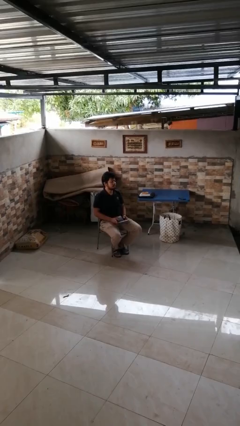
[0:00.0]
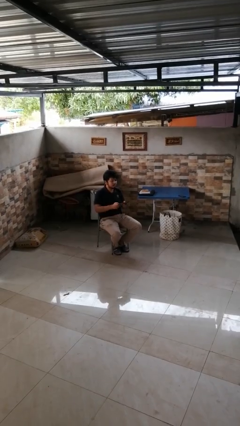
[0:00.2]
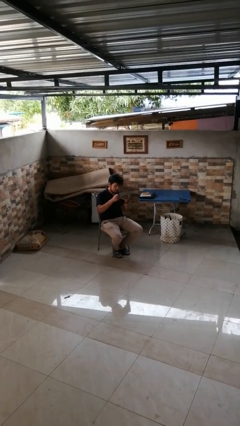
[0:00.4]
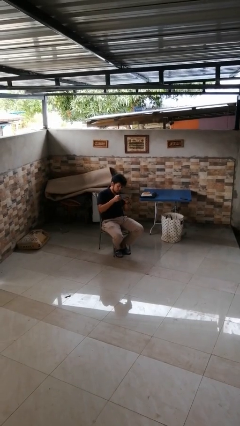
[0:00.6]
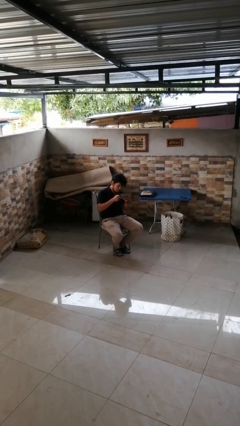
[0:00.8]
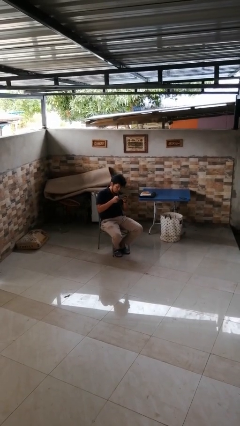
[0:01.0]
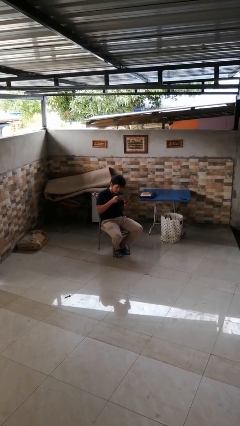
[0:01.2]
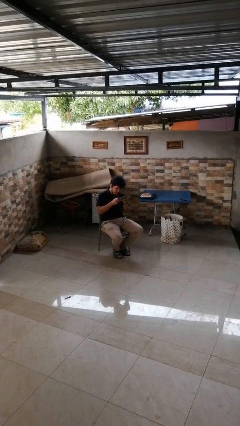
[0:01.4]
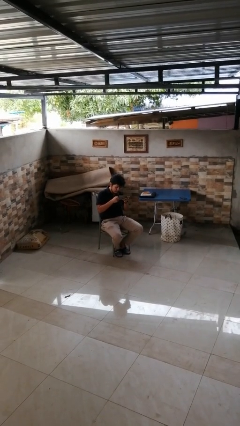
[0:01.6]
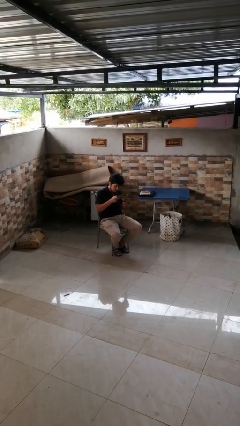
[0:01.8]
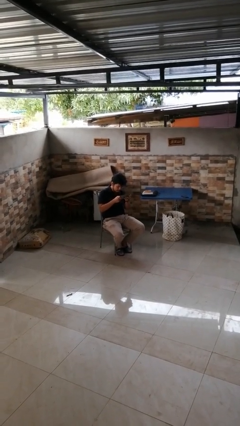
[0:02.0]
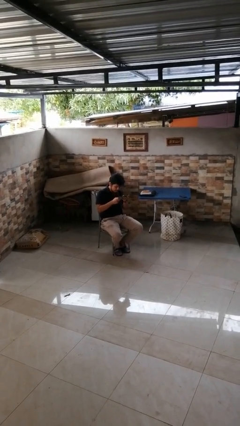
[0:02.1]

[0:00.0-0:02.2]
person interacts with handheld game

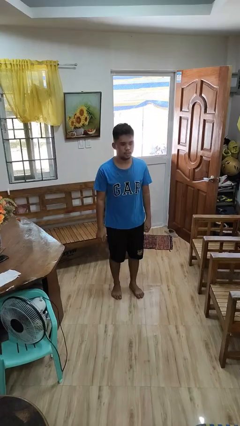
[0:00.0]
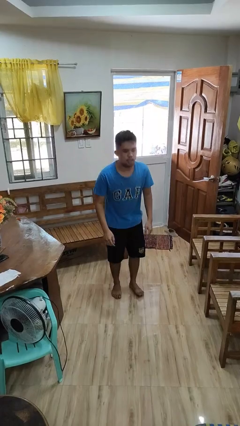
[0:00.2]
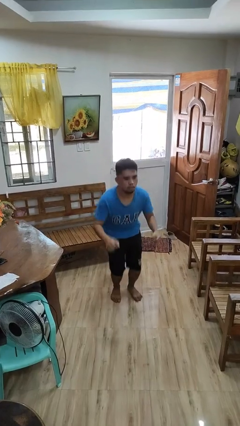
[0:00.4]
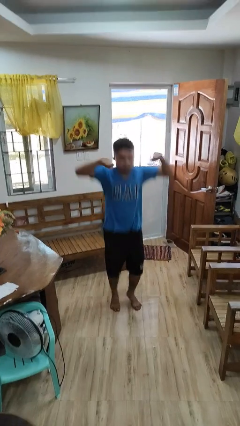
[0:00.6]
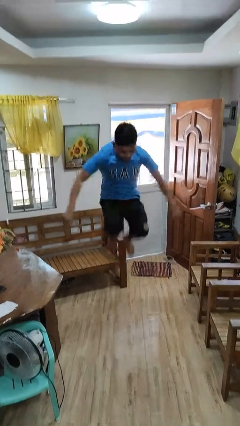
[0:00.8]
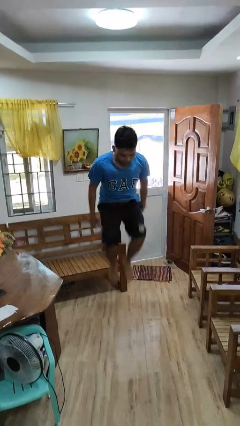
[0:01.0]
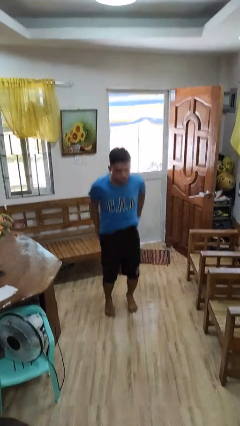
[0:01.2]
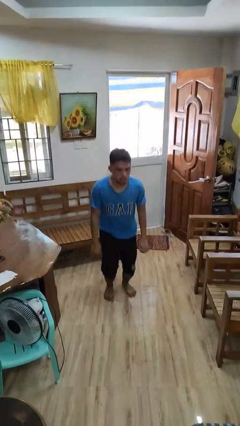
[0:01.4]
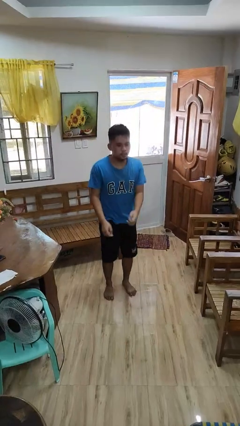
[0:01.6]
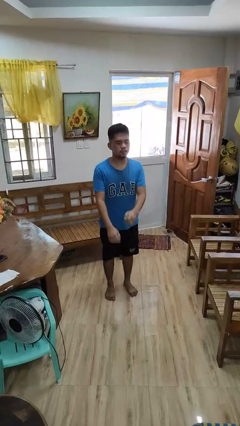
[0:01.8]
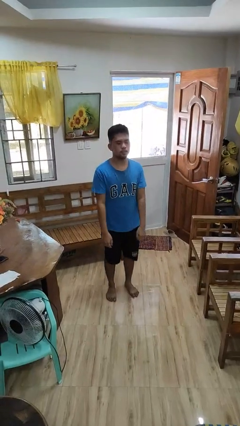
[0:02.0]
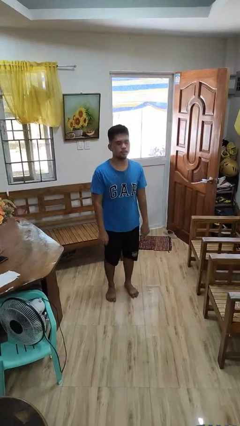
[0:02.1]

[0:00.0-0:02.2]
person jumps

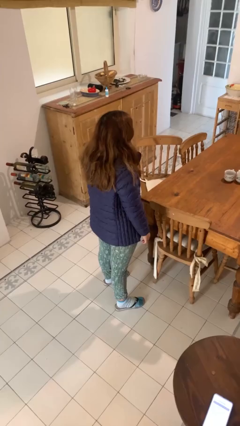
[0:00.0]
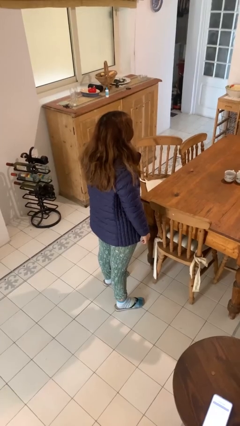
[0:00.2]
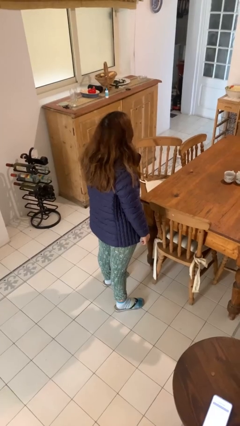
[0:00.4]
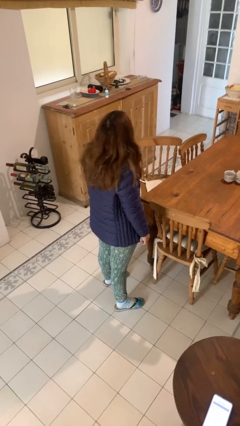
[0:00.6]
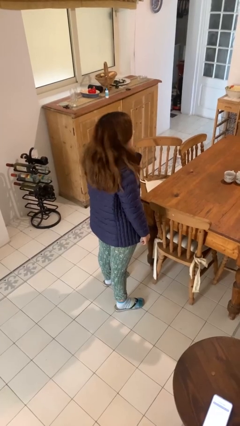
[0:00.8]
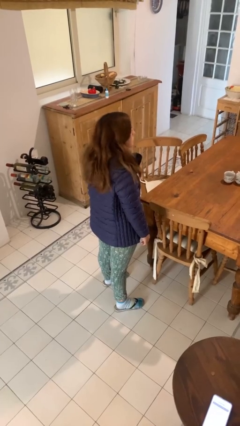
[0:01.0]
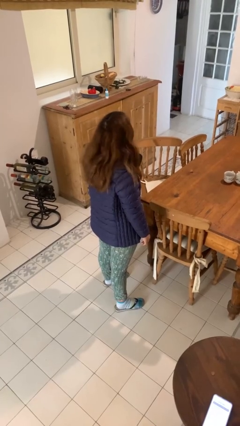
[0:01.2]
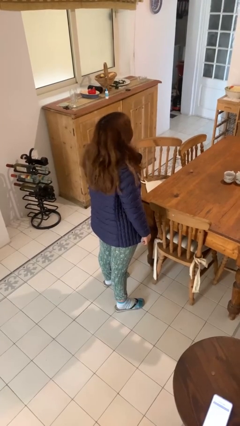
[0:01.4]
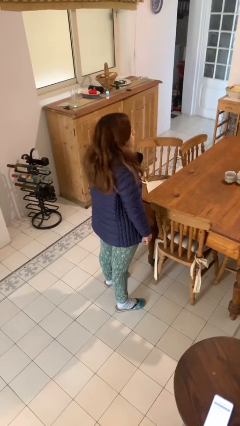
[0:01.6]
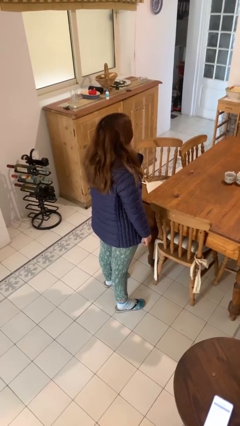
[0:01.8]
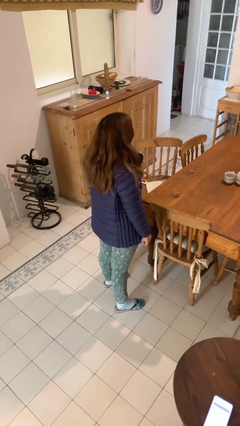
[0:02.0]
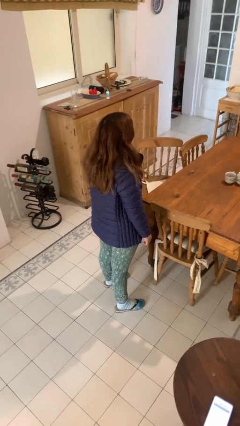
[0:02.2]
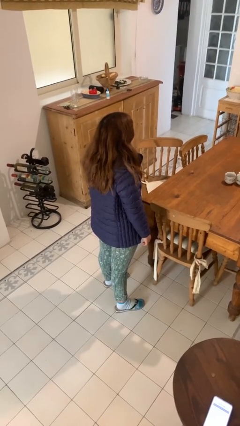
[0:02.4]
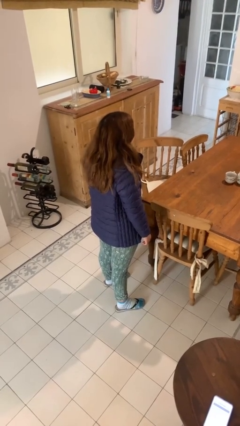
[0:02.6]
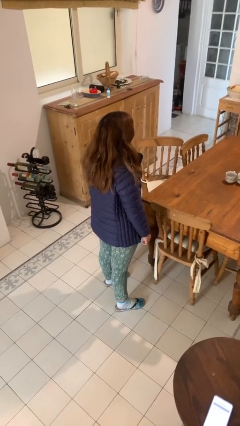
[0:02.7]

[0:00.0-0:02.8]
person shakes head

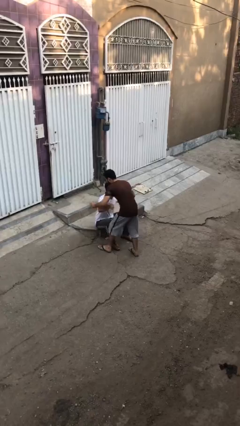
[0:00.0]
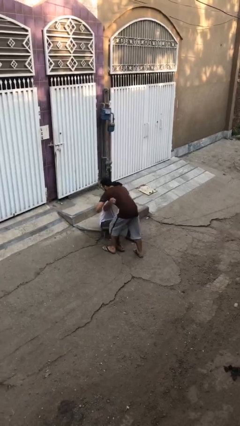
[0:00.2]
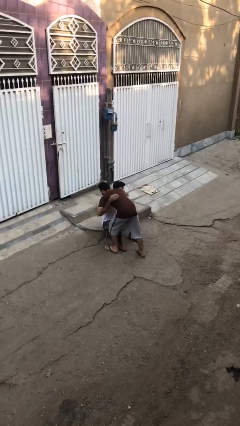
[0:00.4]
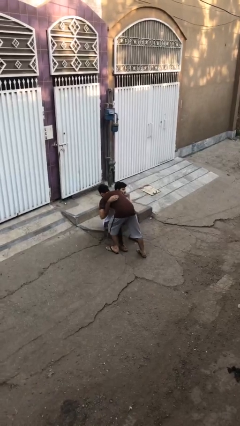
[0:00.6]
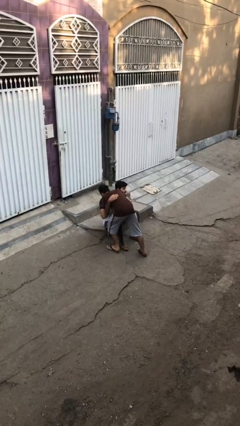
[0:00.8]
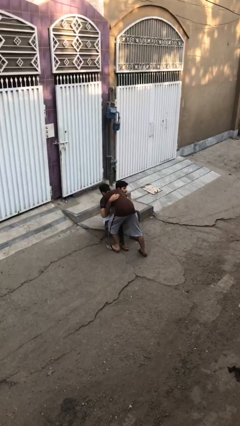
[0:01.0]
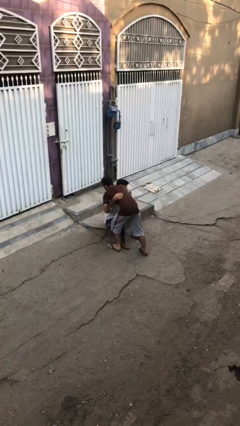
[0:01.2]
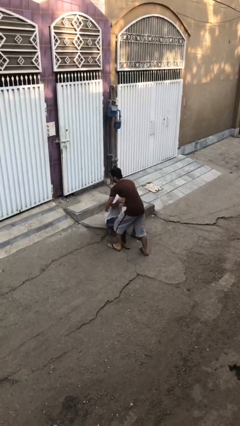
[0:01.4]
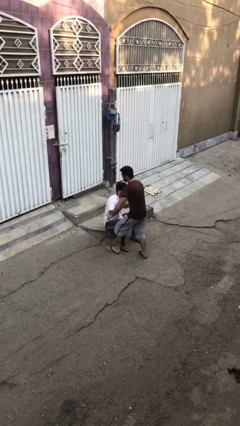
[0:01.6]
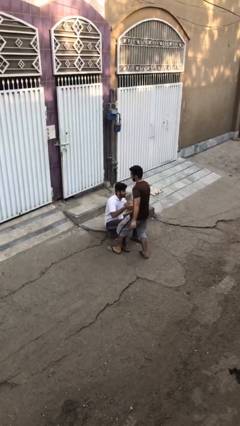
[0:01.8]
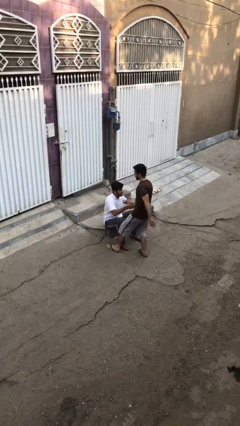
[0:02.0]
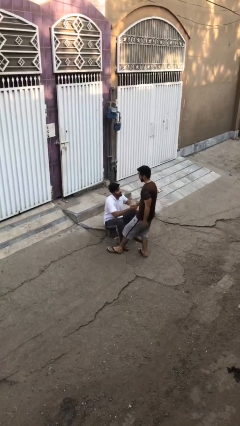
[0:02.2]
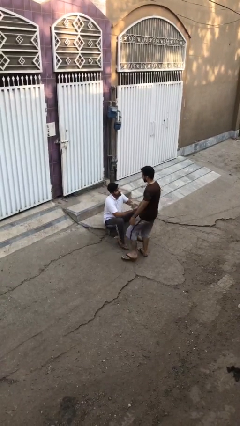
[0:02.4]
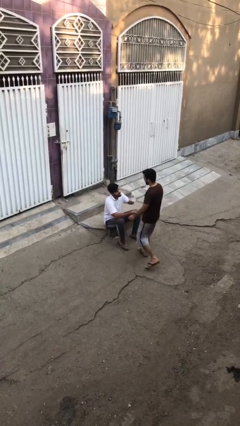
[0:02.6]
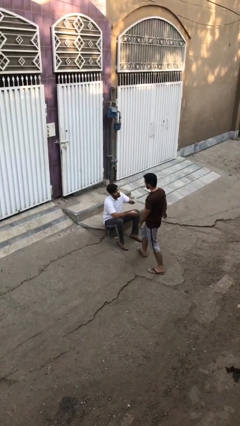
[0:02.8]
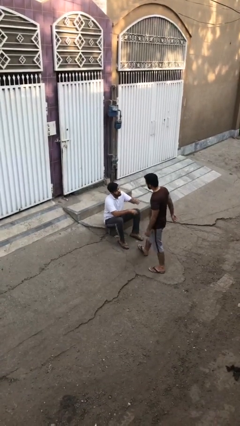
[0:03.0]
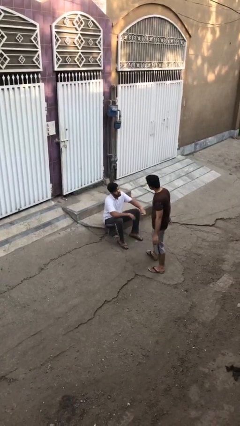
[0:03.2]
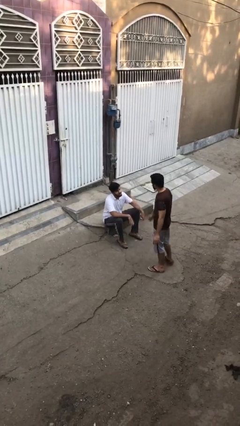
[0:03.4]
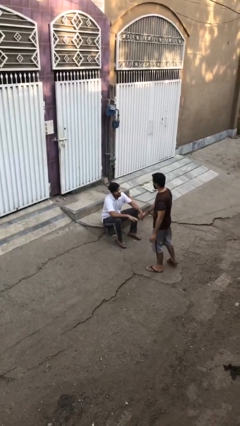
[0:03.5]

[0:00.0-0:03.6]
person embraces person

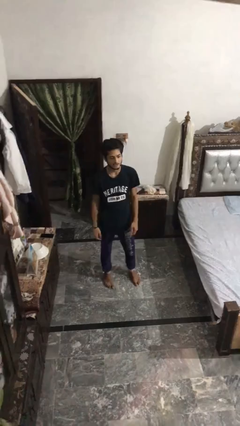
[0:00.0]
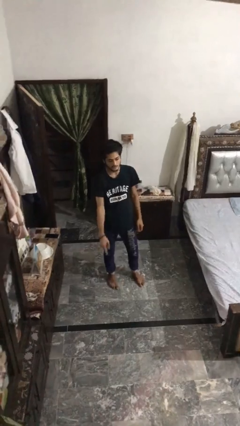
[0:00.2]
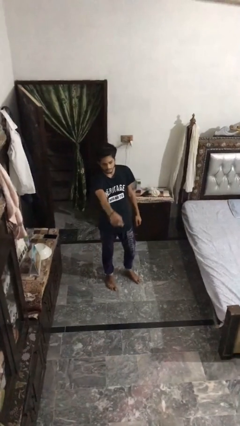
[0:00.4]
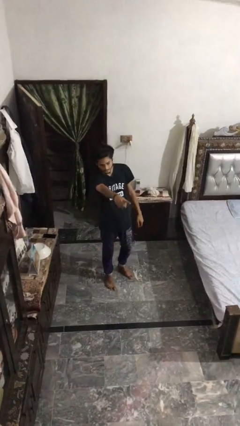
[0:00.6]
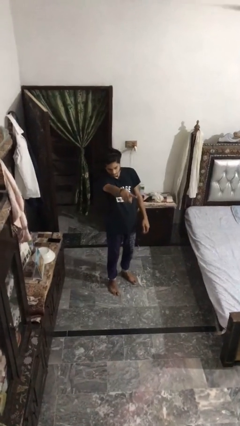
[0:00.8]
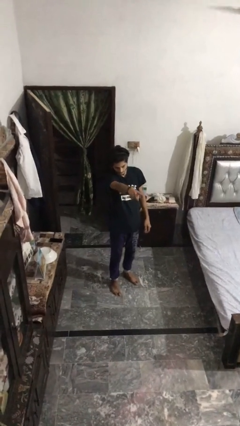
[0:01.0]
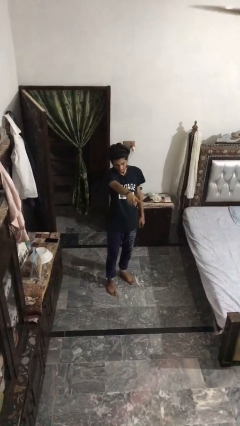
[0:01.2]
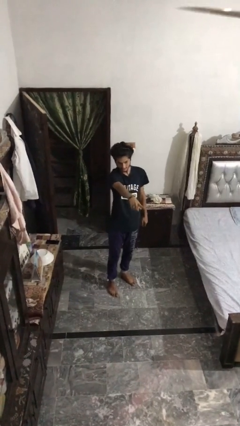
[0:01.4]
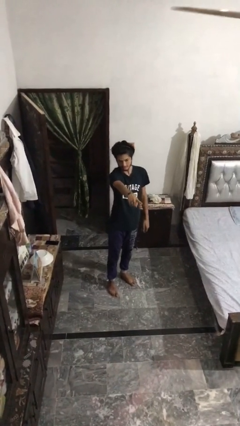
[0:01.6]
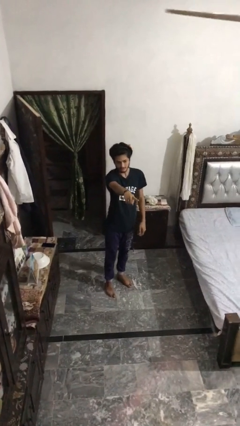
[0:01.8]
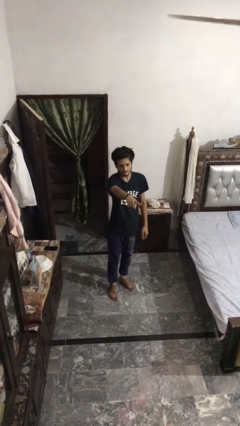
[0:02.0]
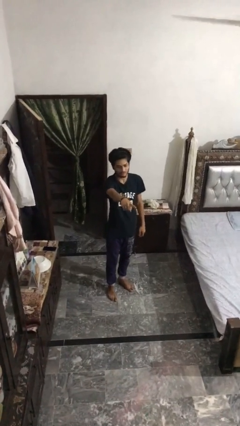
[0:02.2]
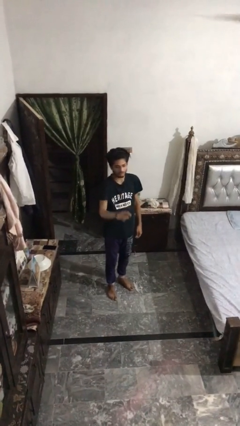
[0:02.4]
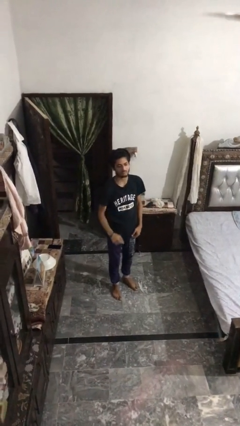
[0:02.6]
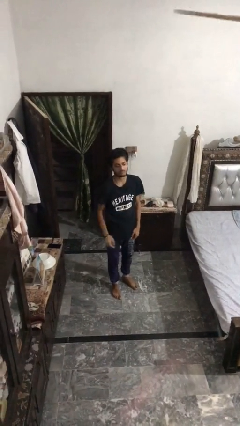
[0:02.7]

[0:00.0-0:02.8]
person points at person

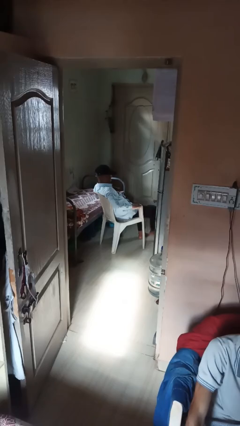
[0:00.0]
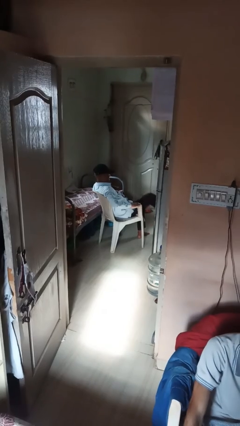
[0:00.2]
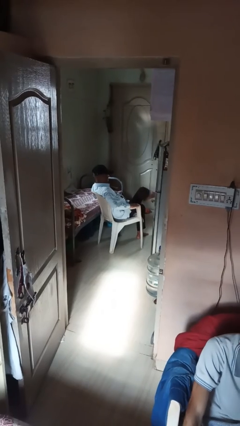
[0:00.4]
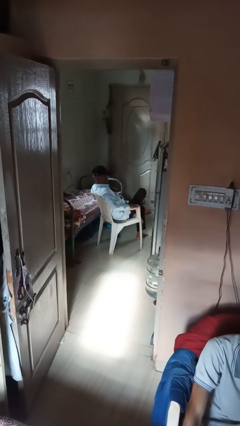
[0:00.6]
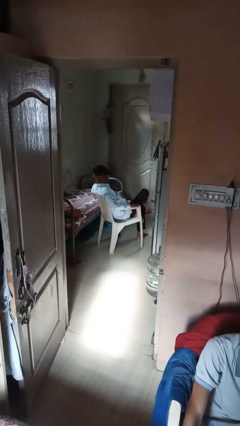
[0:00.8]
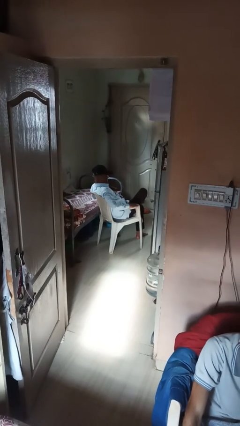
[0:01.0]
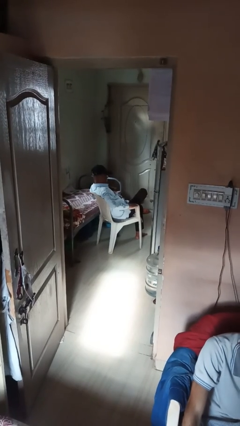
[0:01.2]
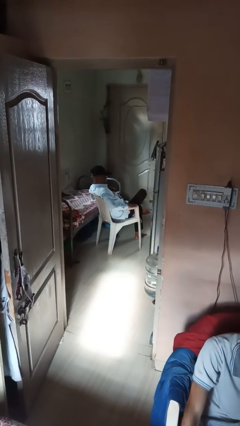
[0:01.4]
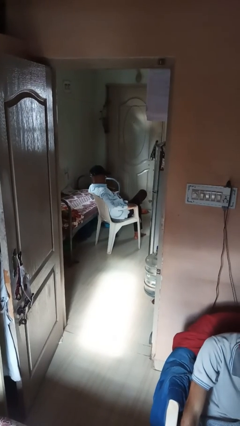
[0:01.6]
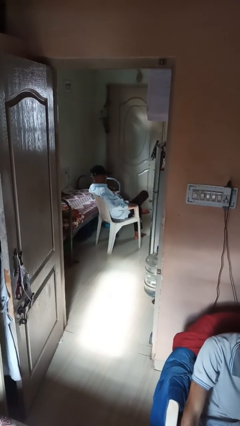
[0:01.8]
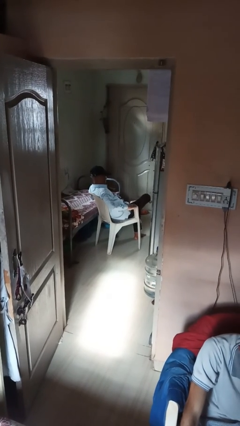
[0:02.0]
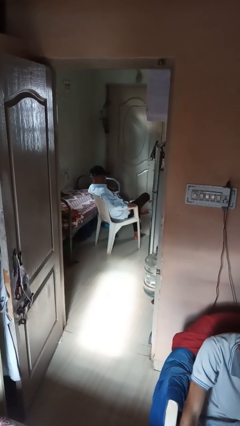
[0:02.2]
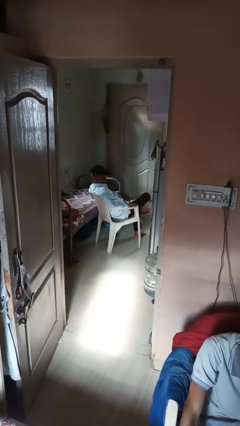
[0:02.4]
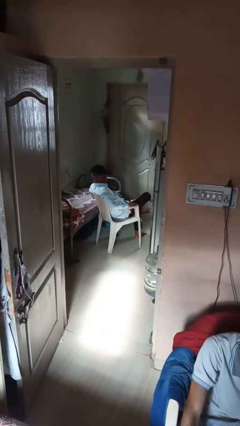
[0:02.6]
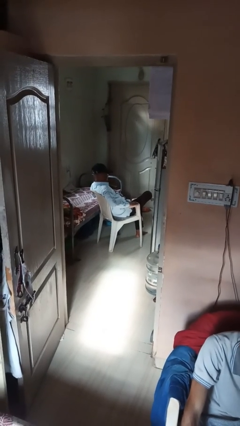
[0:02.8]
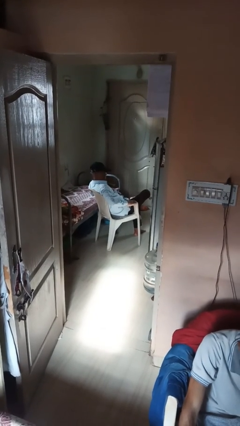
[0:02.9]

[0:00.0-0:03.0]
person crosses legs

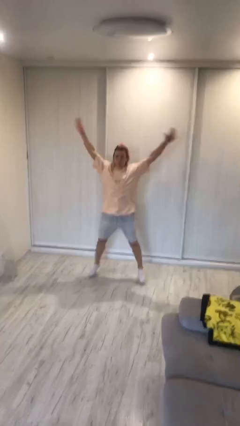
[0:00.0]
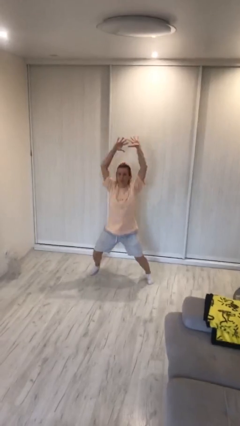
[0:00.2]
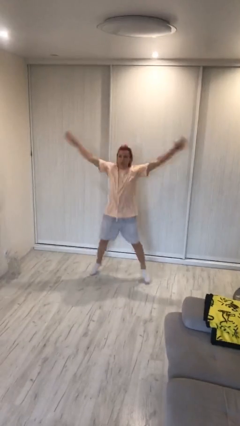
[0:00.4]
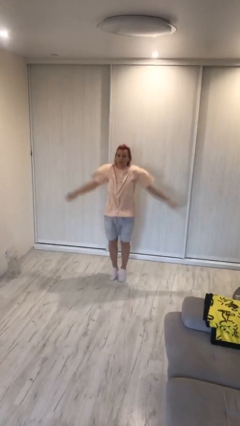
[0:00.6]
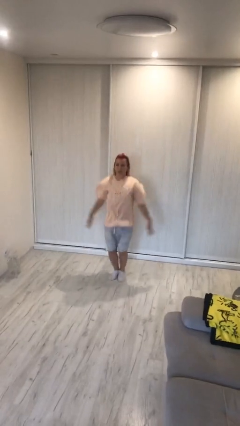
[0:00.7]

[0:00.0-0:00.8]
person exercises with jumping jacks
